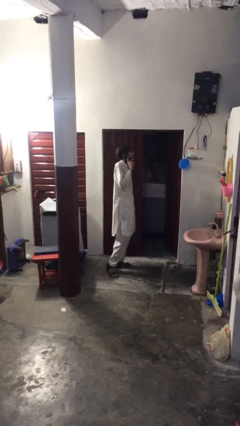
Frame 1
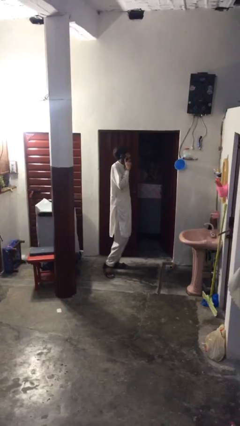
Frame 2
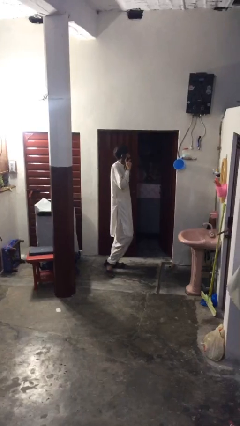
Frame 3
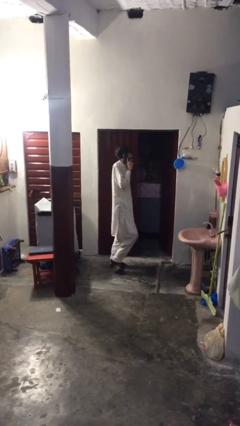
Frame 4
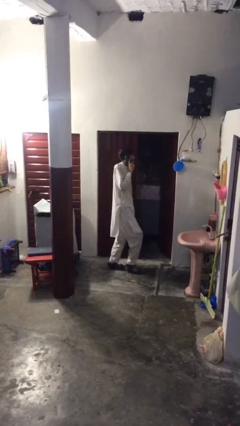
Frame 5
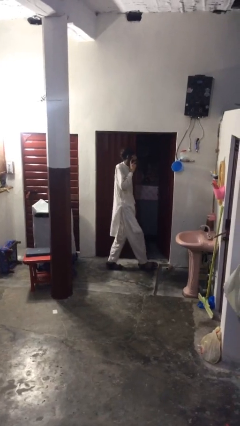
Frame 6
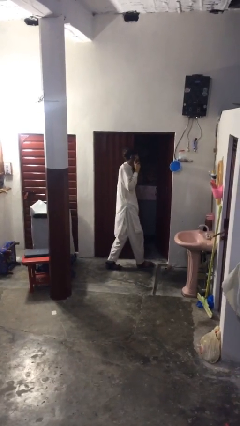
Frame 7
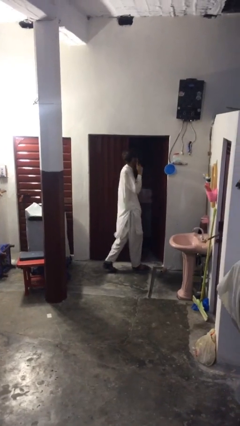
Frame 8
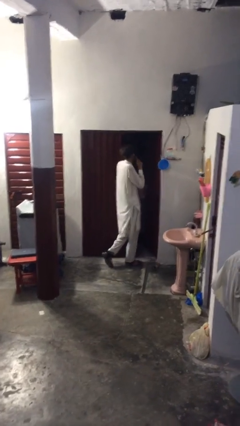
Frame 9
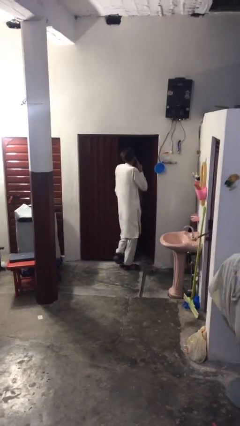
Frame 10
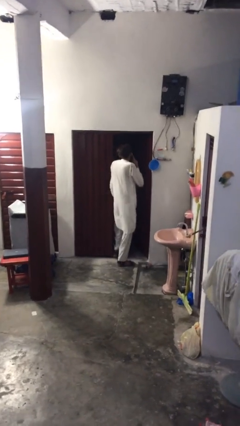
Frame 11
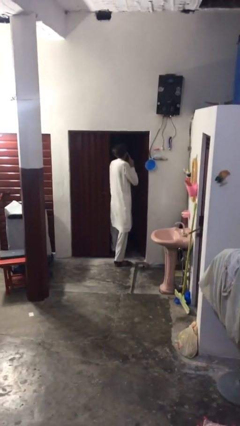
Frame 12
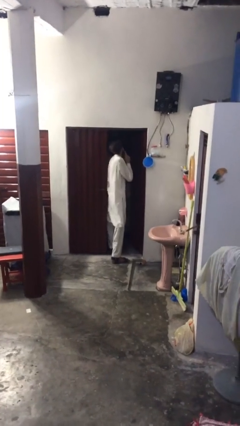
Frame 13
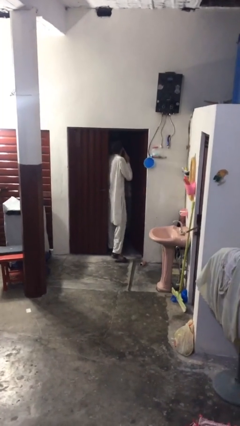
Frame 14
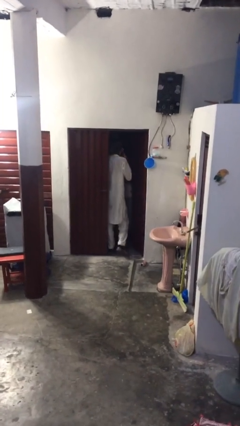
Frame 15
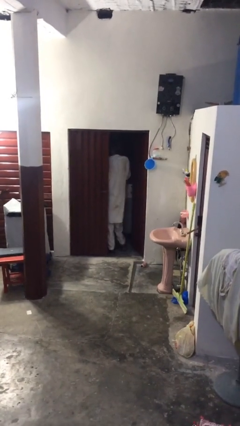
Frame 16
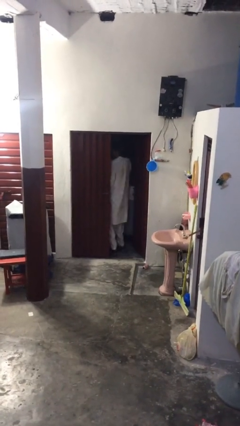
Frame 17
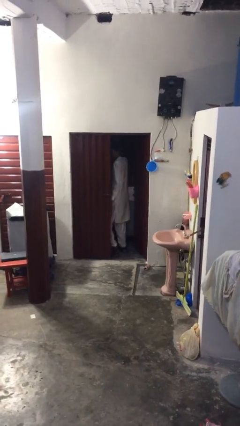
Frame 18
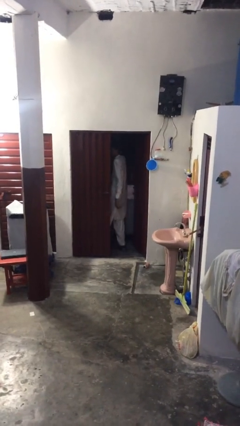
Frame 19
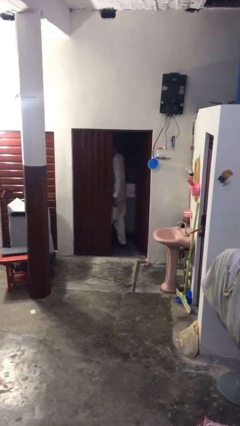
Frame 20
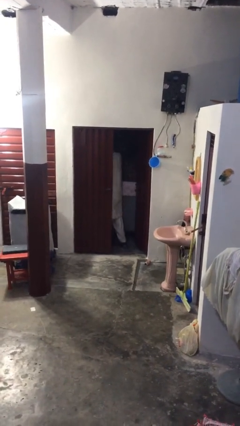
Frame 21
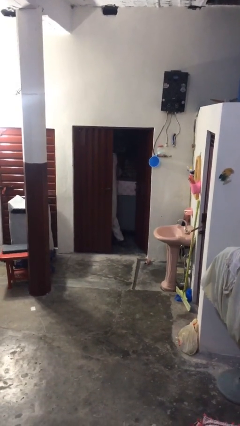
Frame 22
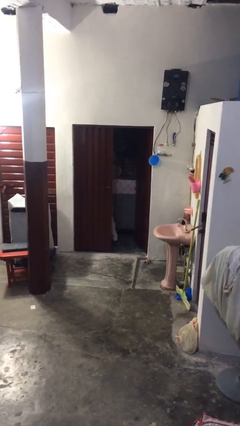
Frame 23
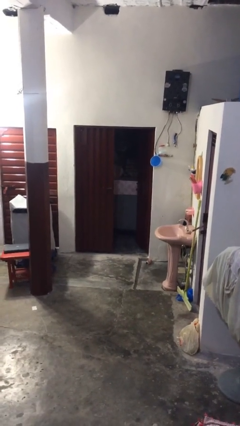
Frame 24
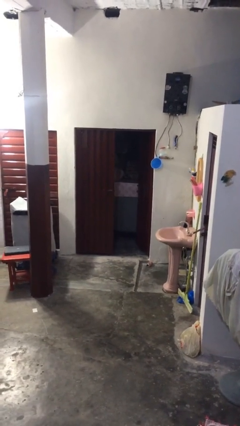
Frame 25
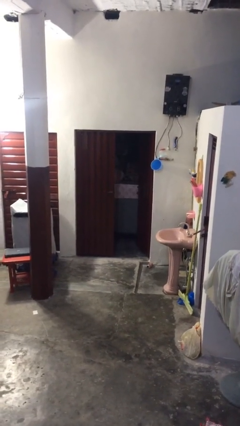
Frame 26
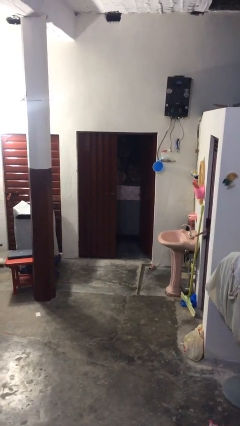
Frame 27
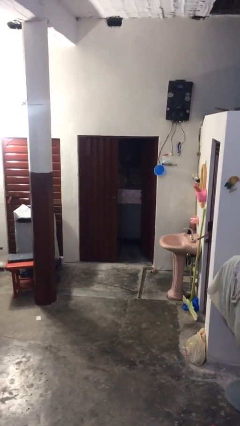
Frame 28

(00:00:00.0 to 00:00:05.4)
person exits scene through structure

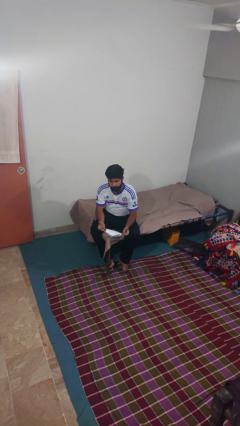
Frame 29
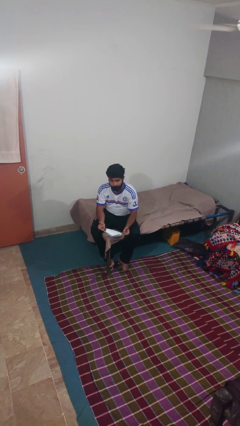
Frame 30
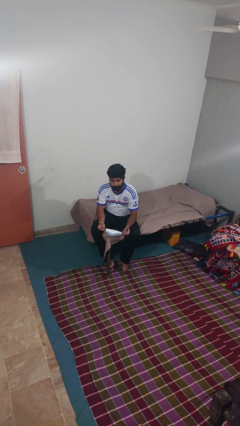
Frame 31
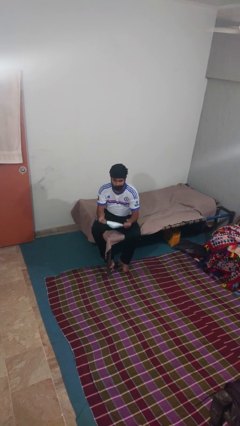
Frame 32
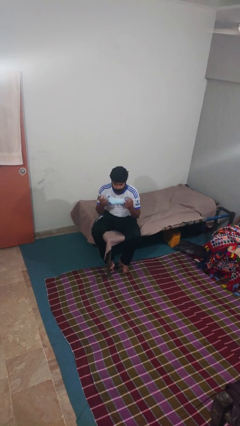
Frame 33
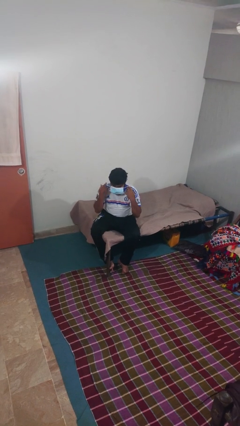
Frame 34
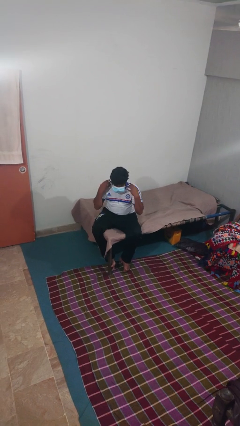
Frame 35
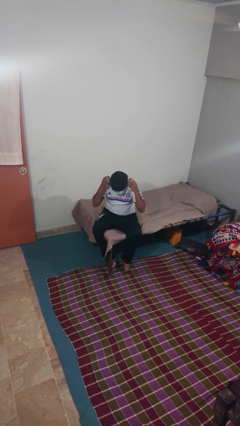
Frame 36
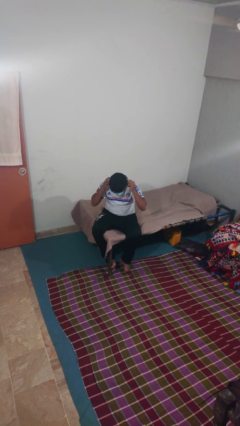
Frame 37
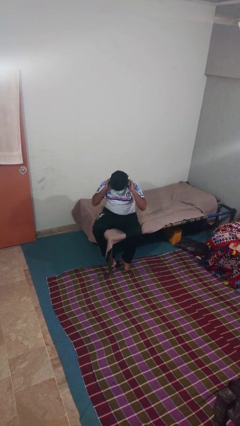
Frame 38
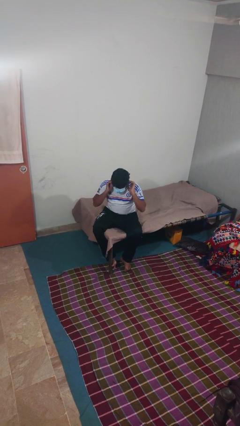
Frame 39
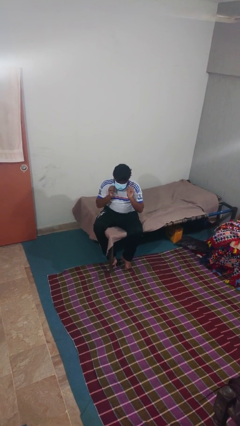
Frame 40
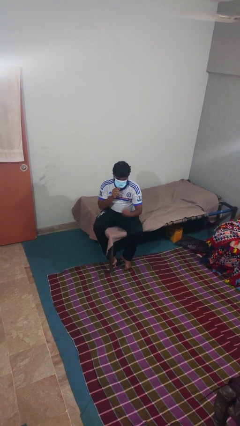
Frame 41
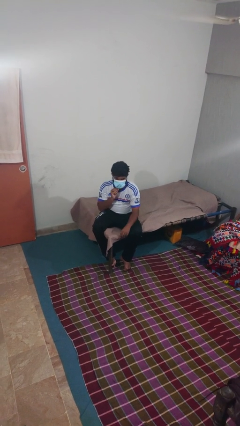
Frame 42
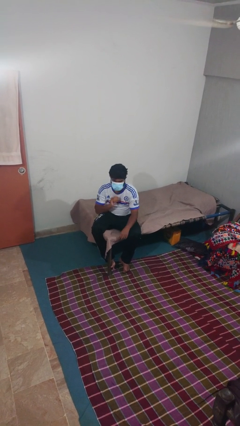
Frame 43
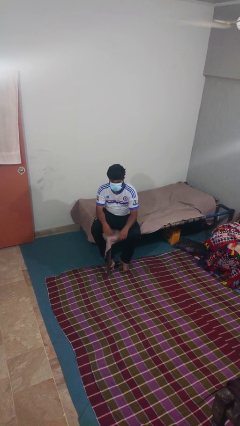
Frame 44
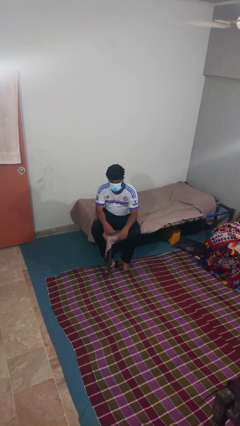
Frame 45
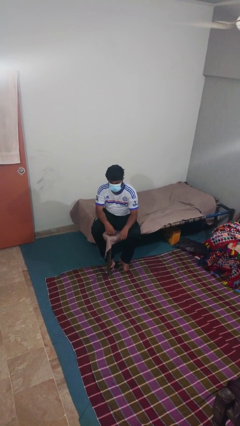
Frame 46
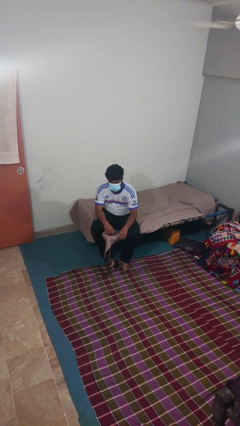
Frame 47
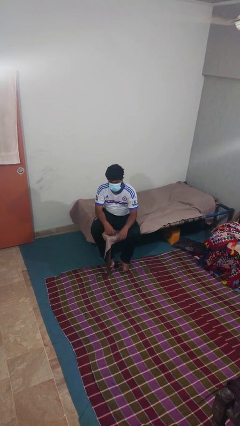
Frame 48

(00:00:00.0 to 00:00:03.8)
person puts on facemask

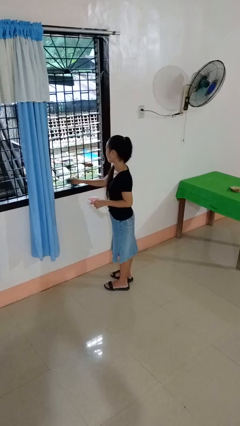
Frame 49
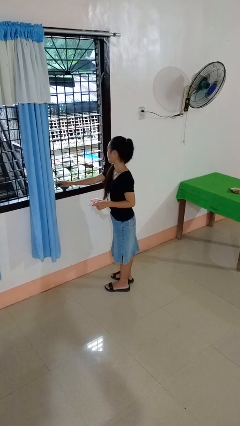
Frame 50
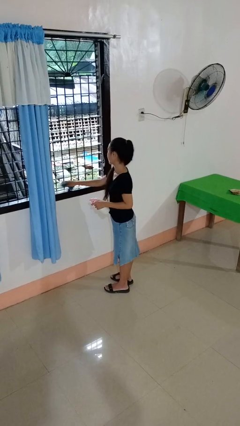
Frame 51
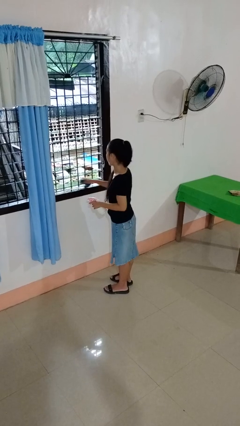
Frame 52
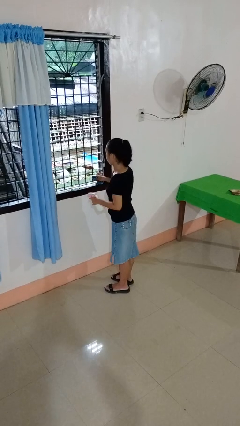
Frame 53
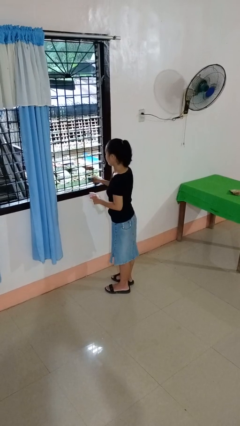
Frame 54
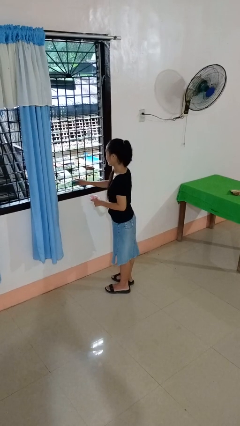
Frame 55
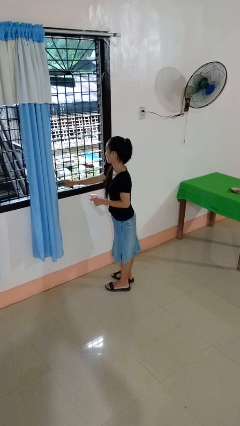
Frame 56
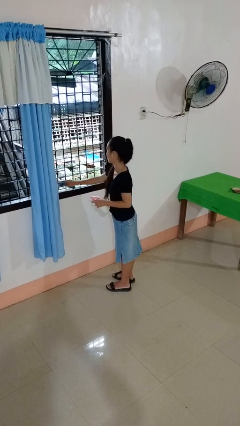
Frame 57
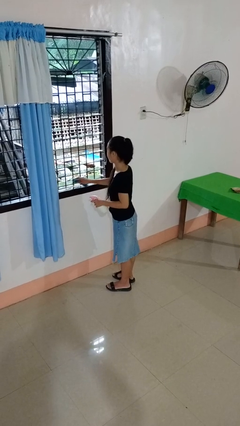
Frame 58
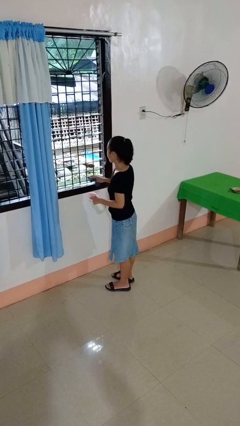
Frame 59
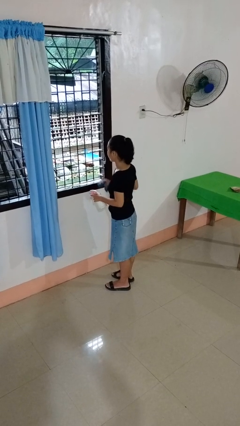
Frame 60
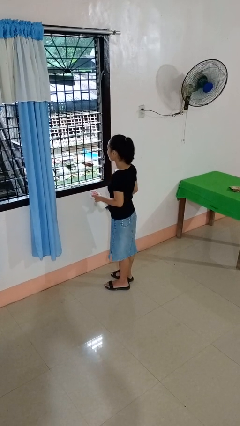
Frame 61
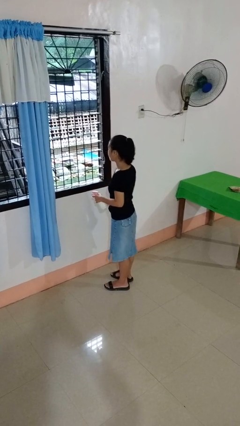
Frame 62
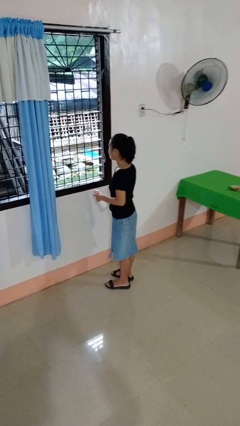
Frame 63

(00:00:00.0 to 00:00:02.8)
person washes window

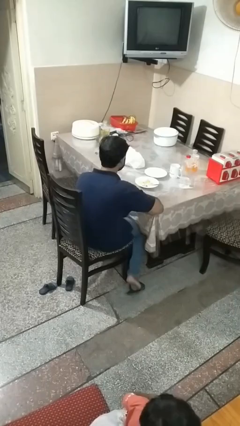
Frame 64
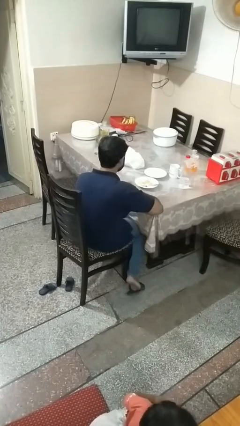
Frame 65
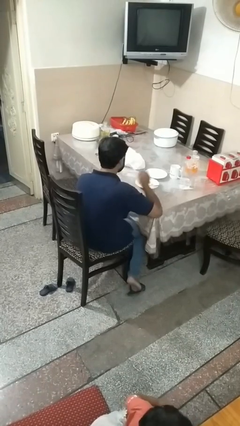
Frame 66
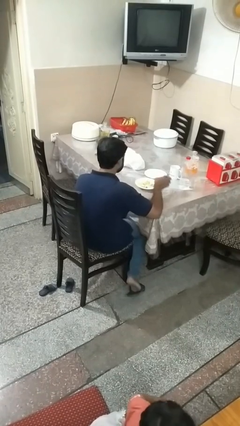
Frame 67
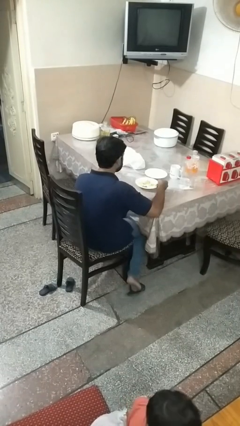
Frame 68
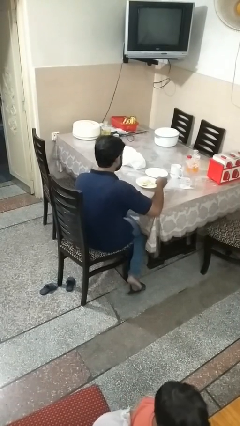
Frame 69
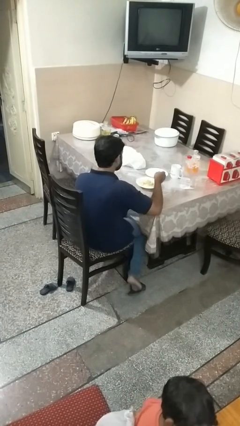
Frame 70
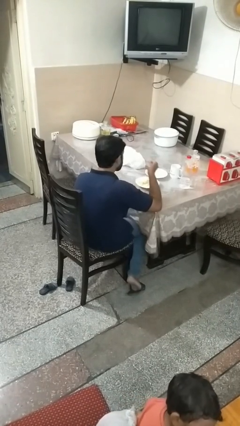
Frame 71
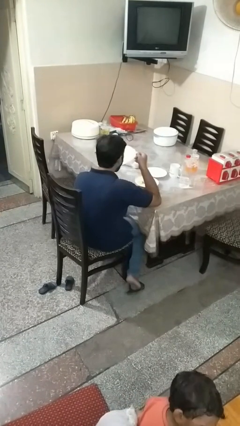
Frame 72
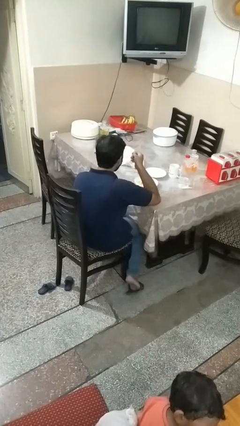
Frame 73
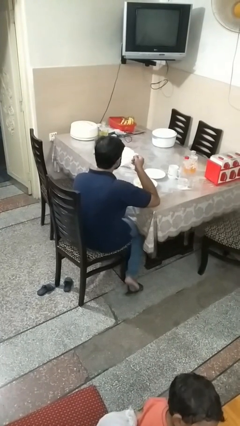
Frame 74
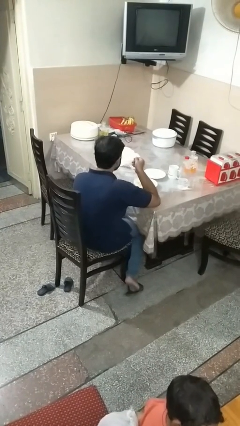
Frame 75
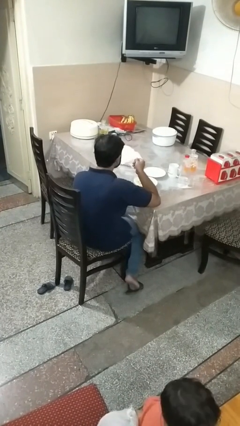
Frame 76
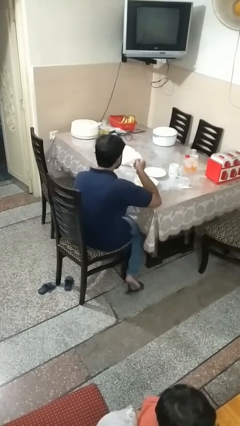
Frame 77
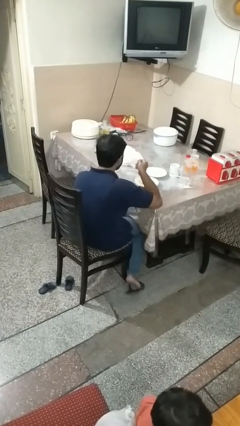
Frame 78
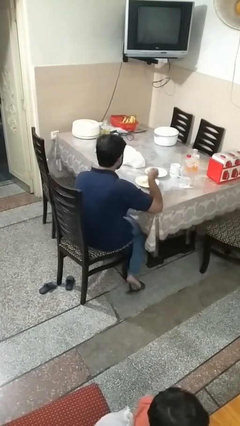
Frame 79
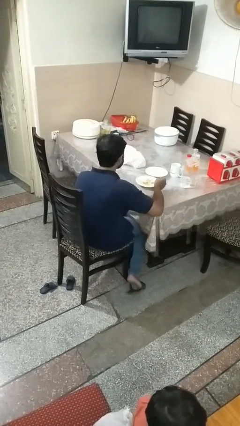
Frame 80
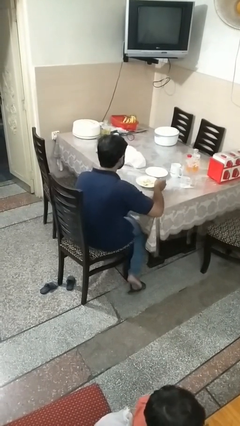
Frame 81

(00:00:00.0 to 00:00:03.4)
person eats with utensil

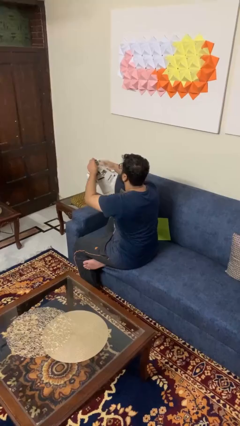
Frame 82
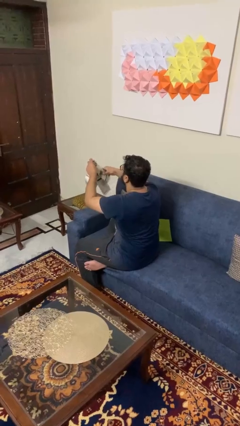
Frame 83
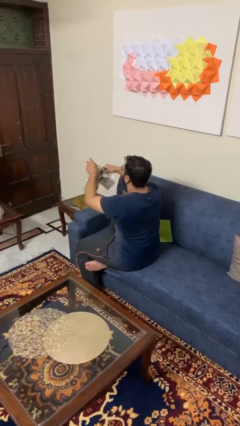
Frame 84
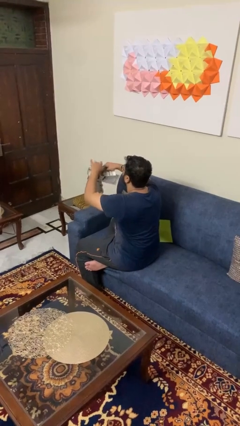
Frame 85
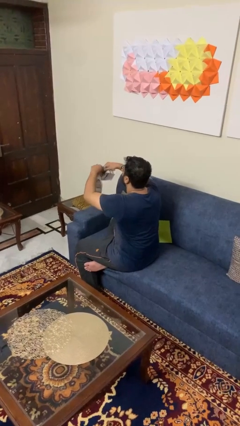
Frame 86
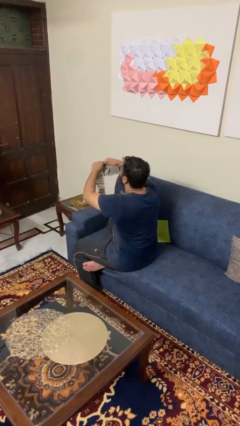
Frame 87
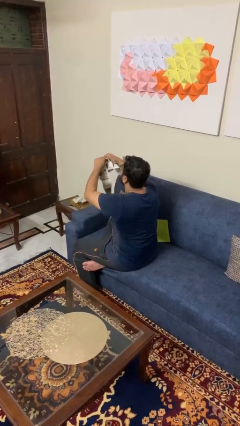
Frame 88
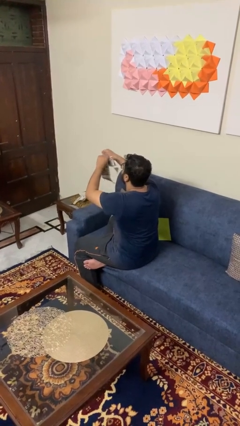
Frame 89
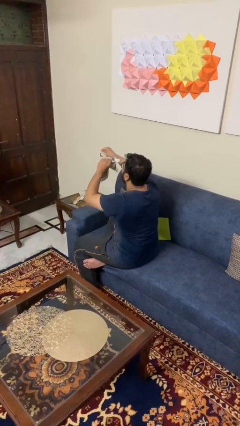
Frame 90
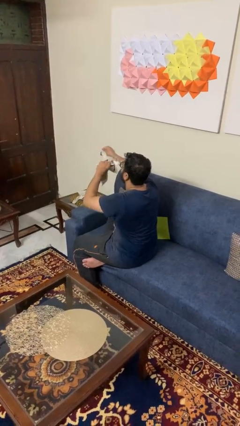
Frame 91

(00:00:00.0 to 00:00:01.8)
person tears paper

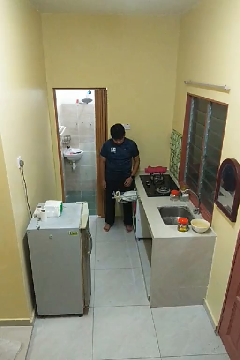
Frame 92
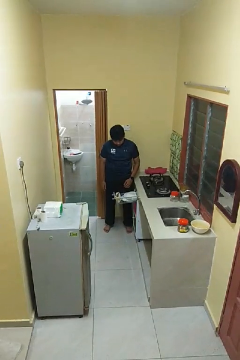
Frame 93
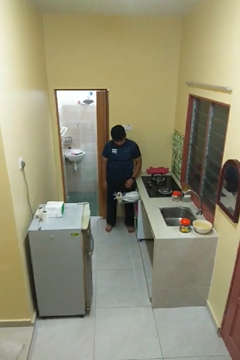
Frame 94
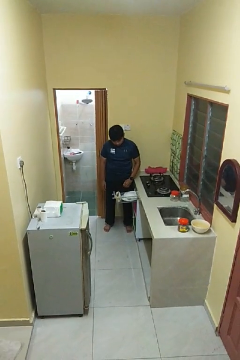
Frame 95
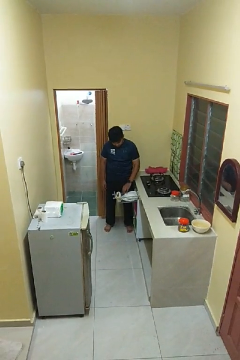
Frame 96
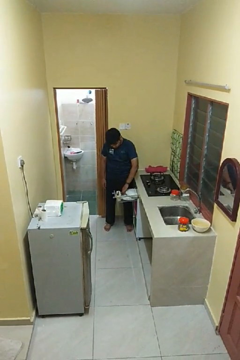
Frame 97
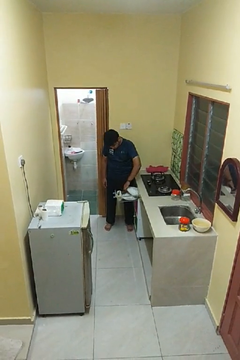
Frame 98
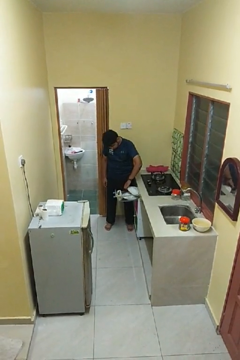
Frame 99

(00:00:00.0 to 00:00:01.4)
person searches in kitchen drawer
